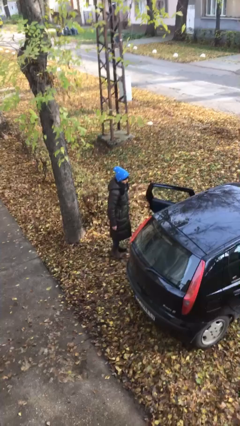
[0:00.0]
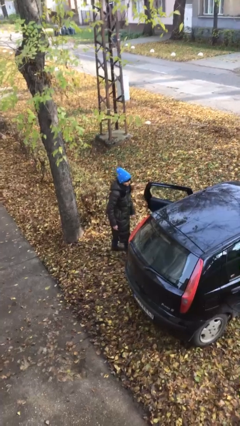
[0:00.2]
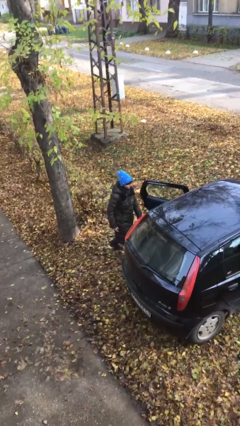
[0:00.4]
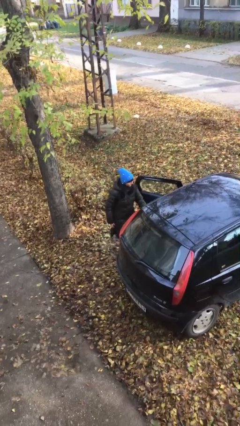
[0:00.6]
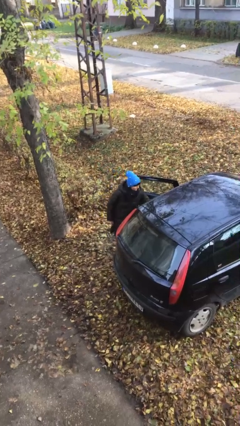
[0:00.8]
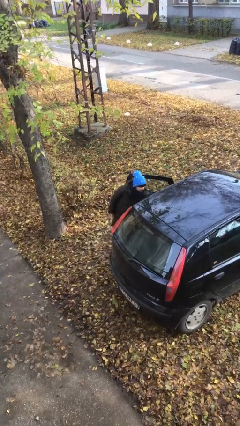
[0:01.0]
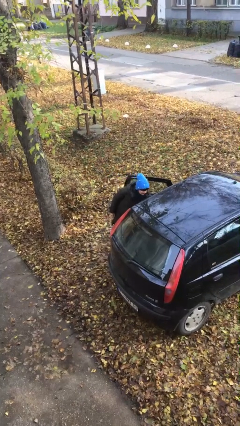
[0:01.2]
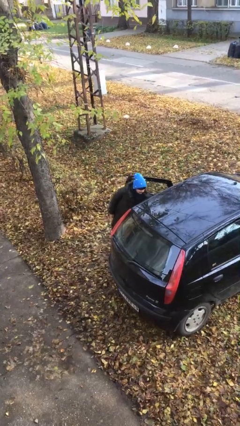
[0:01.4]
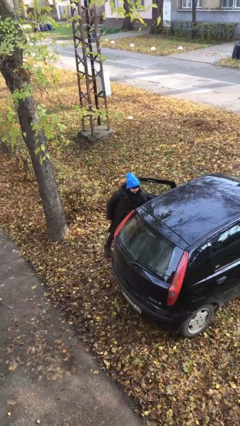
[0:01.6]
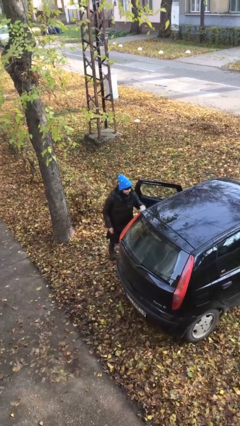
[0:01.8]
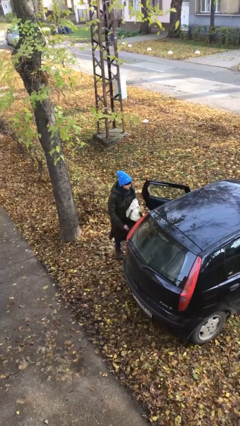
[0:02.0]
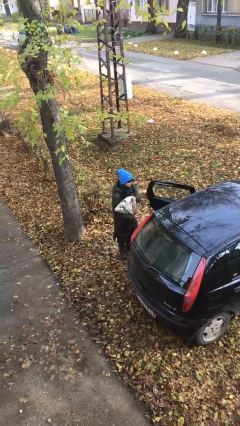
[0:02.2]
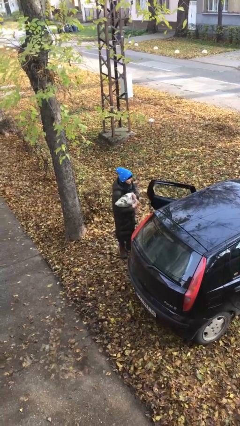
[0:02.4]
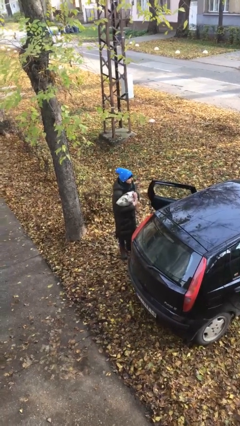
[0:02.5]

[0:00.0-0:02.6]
person unloads car

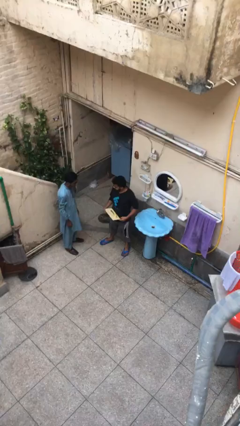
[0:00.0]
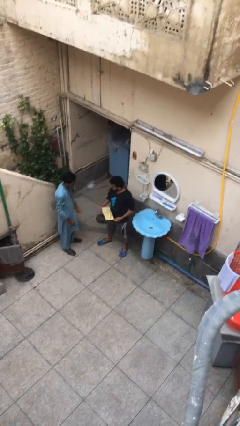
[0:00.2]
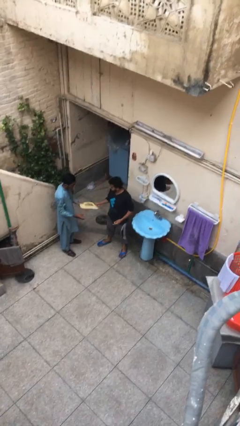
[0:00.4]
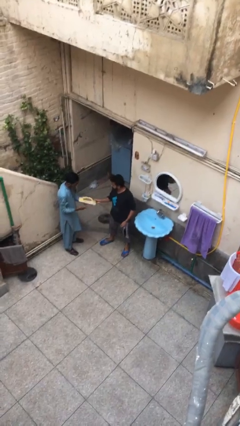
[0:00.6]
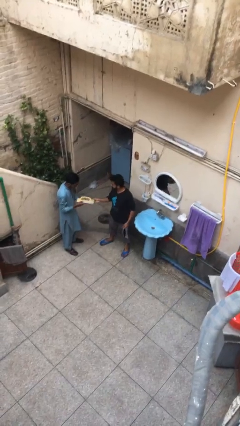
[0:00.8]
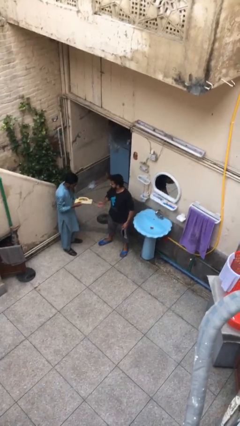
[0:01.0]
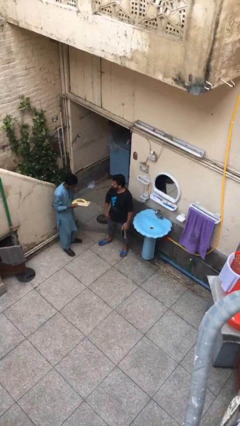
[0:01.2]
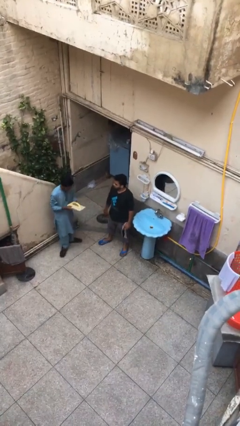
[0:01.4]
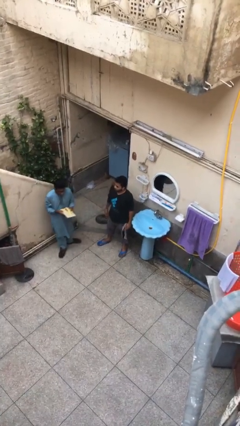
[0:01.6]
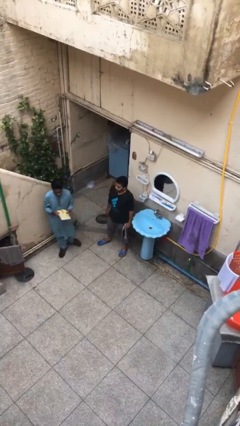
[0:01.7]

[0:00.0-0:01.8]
person transfers object to person

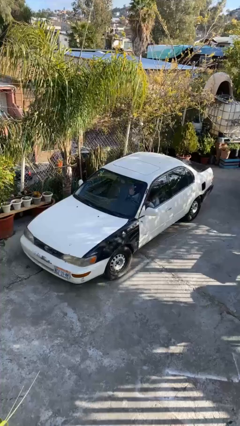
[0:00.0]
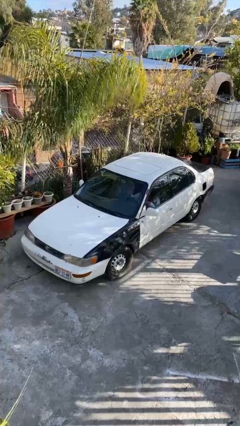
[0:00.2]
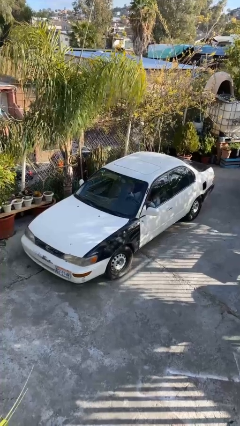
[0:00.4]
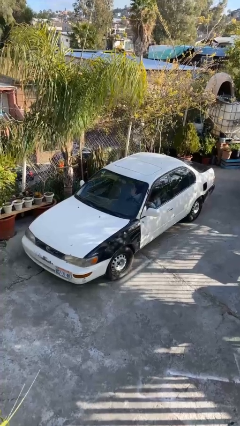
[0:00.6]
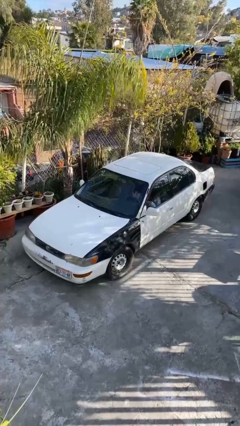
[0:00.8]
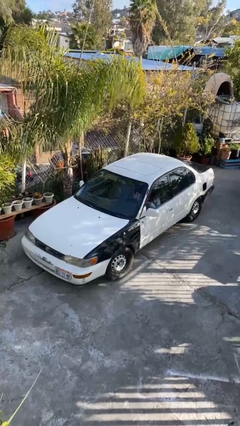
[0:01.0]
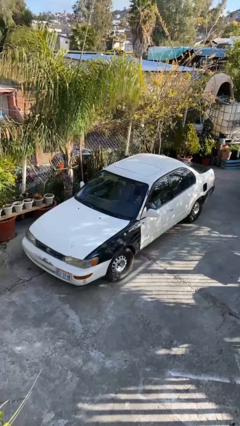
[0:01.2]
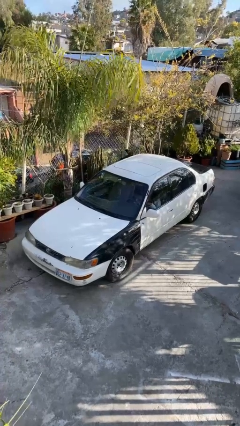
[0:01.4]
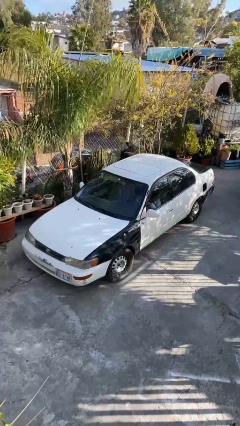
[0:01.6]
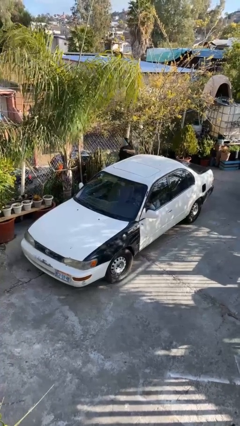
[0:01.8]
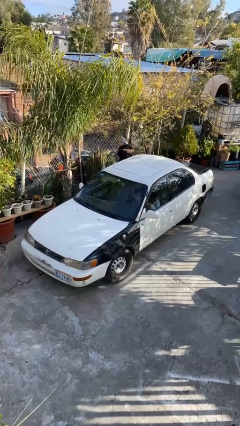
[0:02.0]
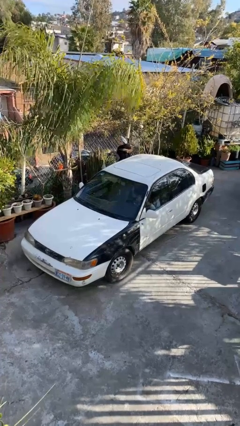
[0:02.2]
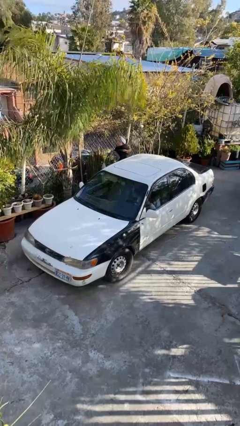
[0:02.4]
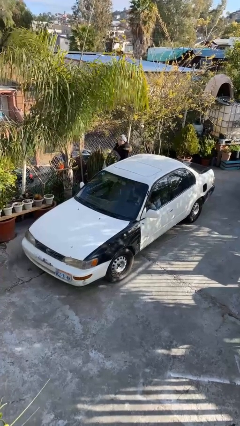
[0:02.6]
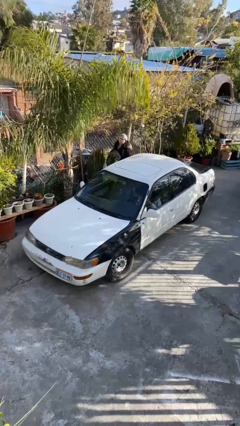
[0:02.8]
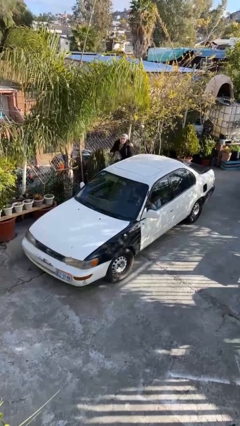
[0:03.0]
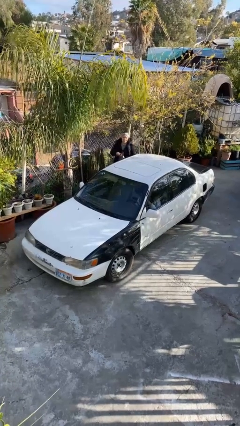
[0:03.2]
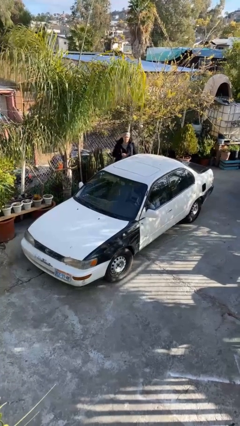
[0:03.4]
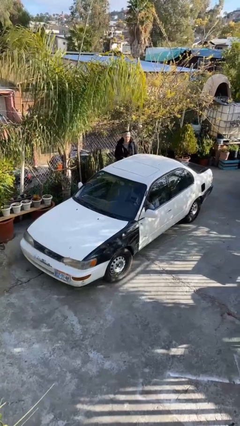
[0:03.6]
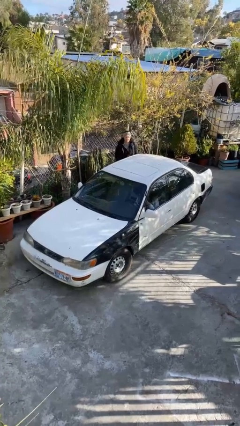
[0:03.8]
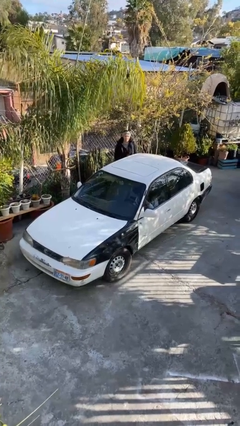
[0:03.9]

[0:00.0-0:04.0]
car drops off person

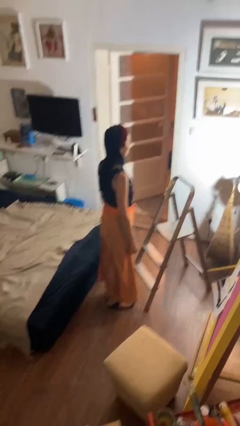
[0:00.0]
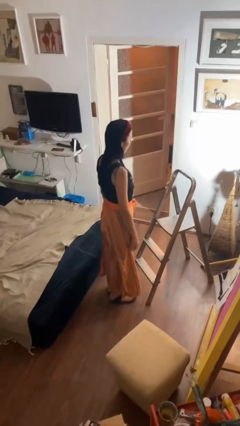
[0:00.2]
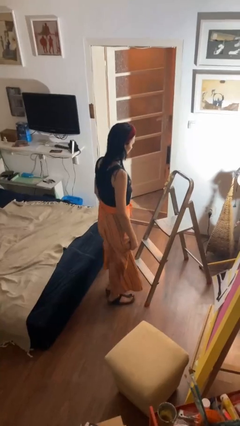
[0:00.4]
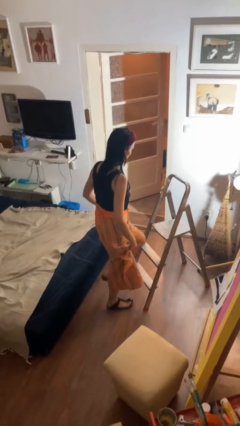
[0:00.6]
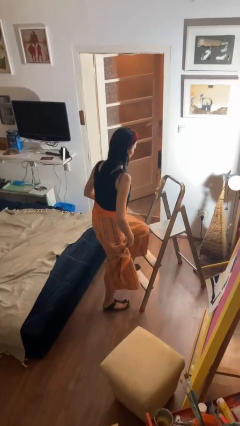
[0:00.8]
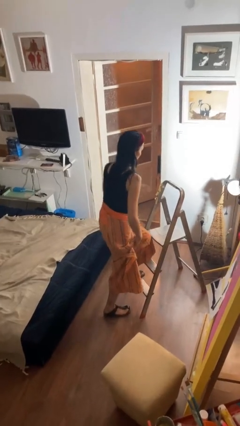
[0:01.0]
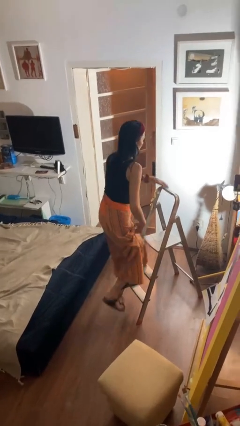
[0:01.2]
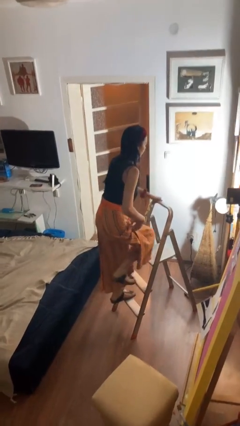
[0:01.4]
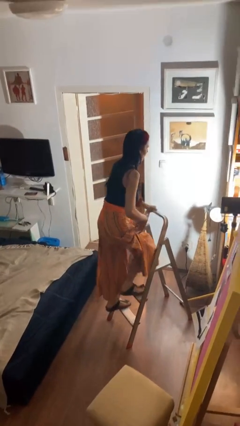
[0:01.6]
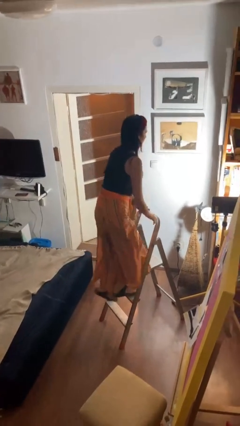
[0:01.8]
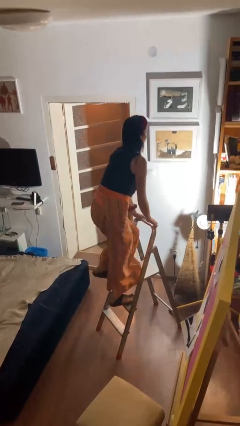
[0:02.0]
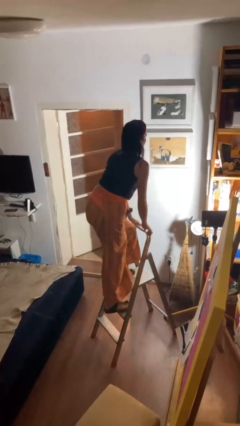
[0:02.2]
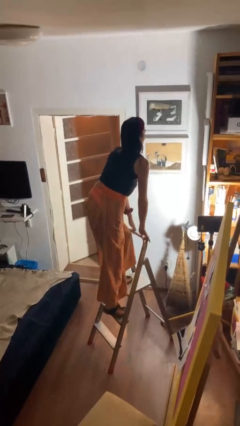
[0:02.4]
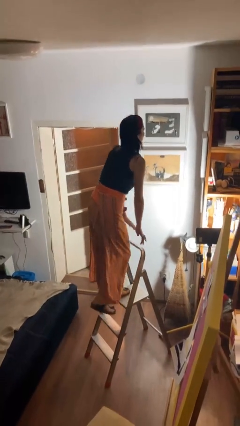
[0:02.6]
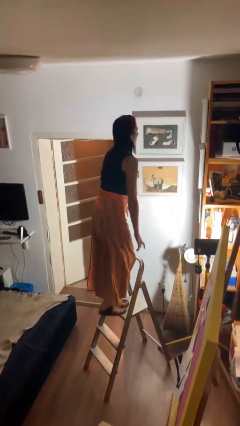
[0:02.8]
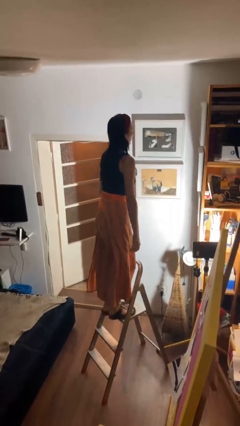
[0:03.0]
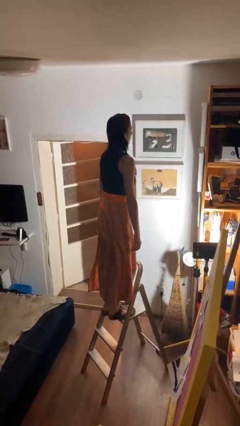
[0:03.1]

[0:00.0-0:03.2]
person climbs up ladder

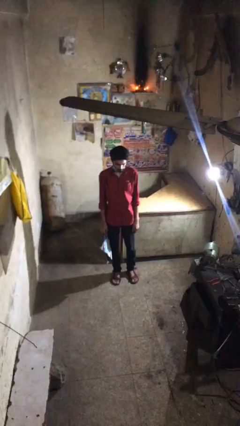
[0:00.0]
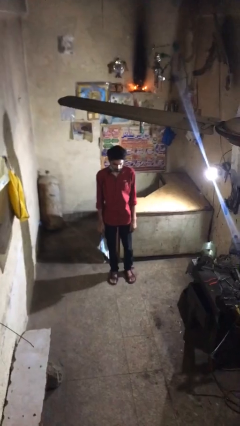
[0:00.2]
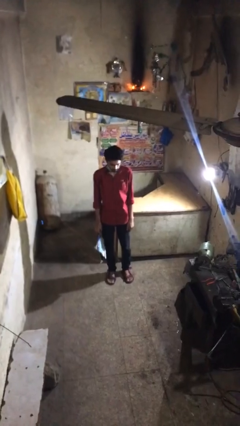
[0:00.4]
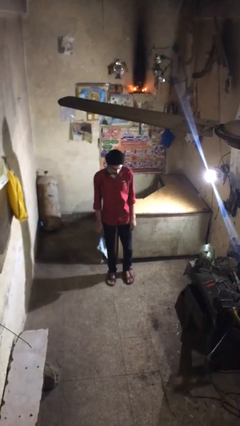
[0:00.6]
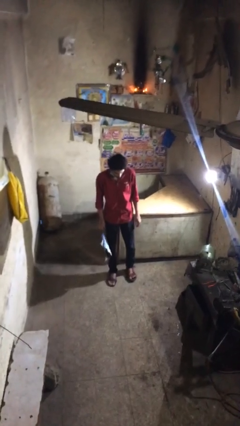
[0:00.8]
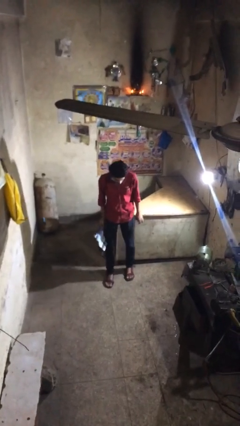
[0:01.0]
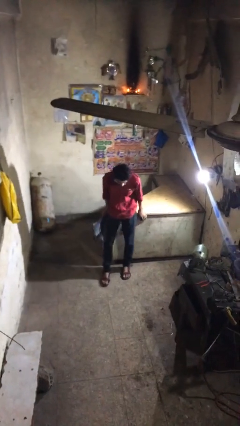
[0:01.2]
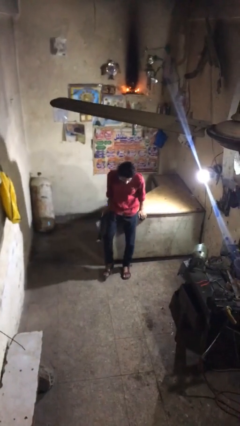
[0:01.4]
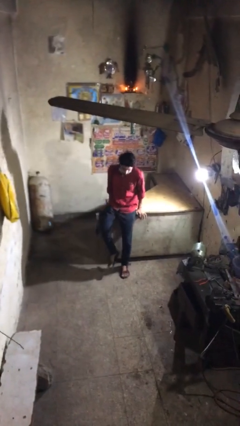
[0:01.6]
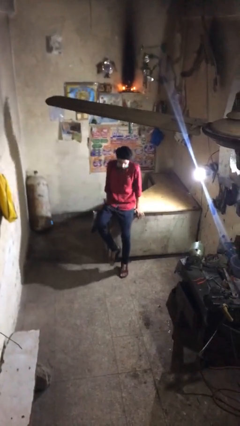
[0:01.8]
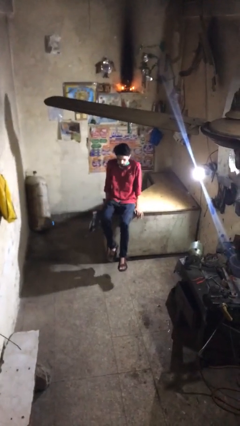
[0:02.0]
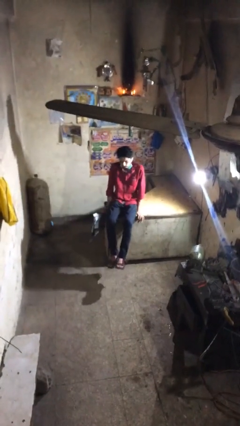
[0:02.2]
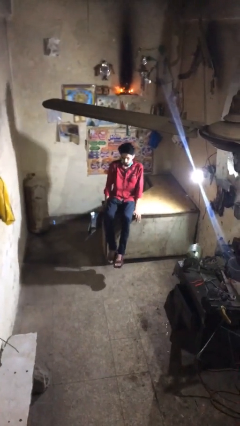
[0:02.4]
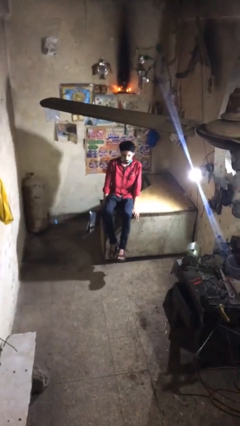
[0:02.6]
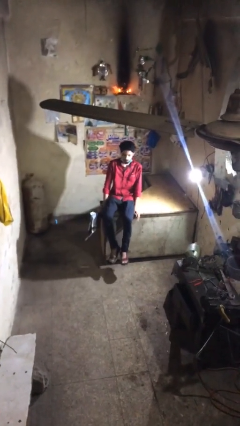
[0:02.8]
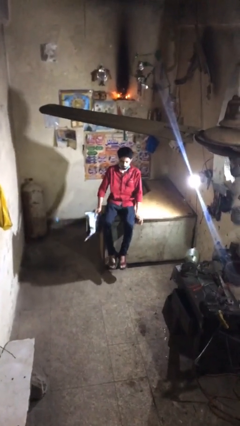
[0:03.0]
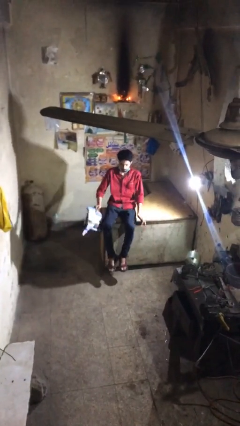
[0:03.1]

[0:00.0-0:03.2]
person sits down

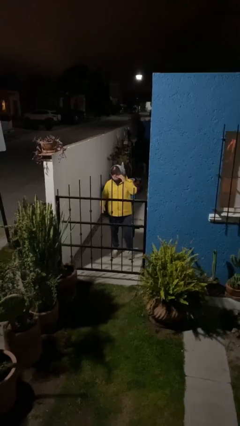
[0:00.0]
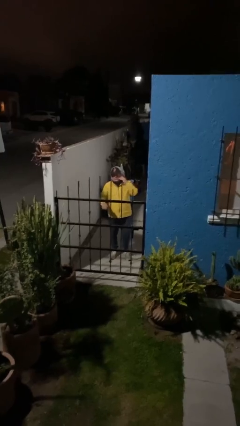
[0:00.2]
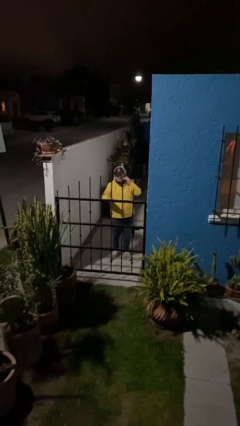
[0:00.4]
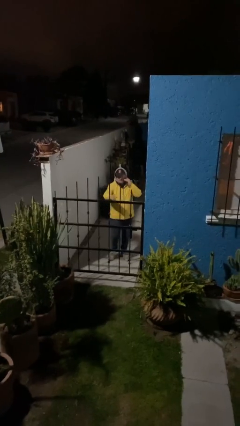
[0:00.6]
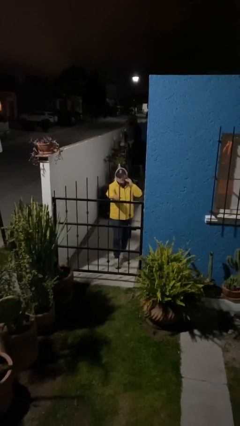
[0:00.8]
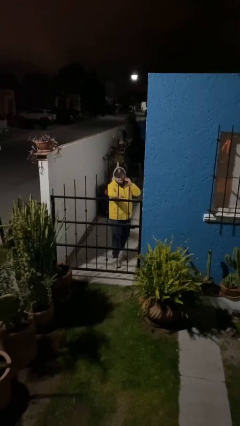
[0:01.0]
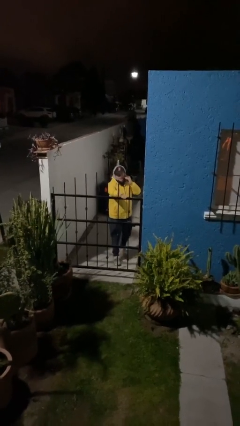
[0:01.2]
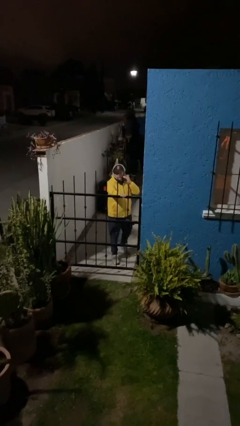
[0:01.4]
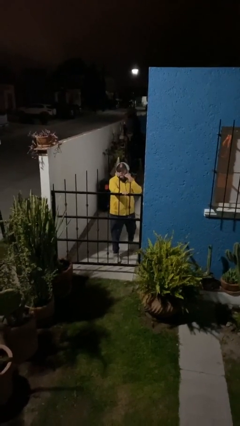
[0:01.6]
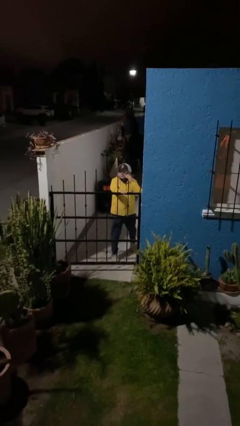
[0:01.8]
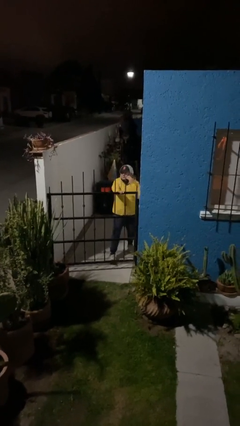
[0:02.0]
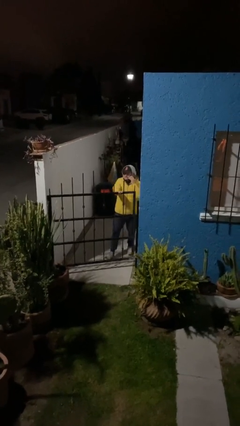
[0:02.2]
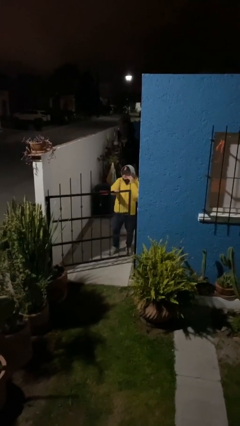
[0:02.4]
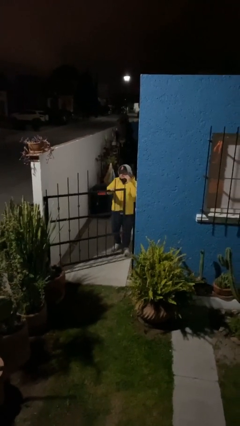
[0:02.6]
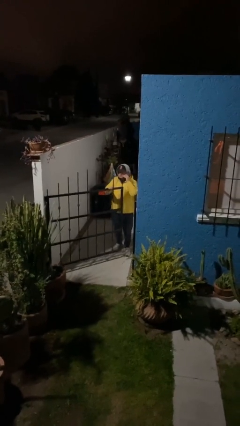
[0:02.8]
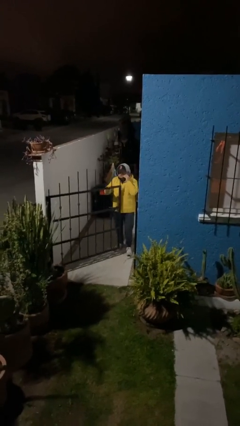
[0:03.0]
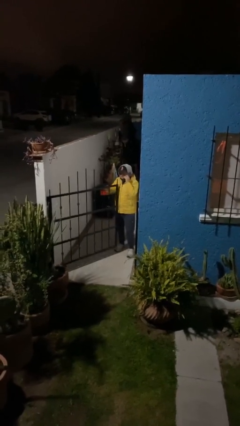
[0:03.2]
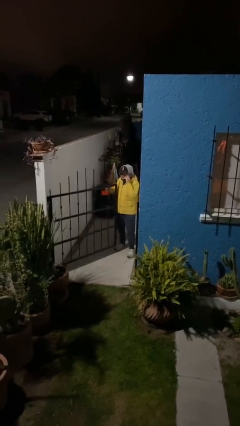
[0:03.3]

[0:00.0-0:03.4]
person opens facility door
